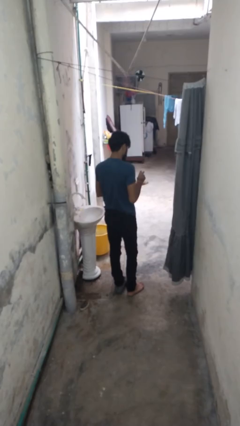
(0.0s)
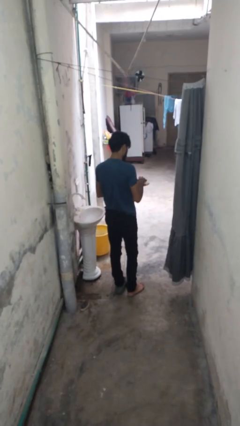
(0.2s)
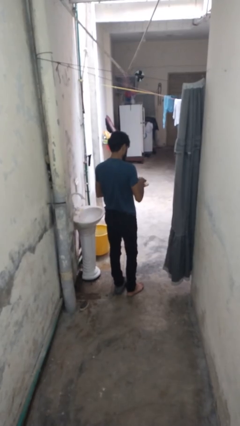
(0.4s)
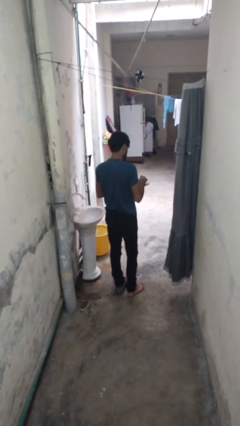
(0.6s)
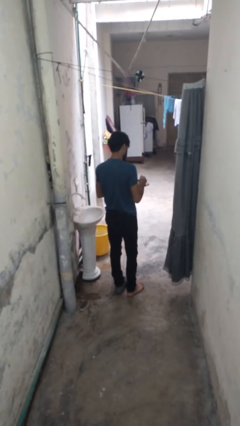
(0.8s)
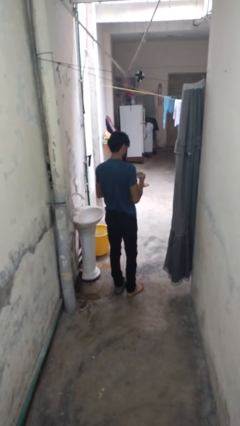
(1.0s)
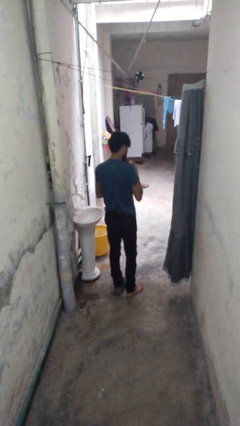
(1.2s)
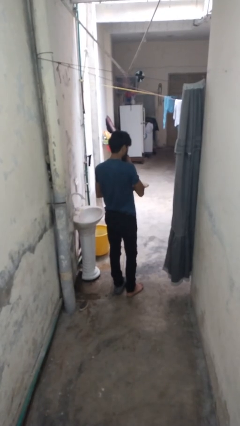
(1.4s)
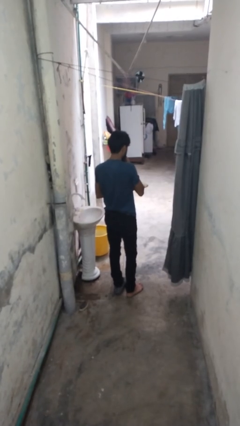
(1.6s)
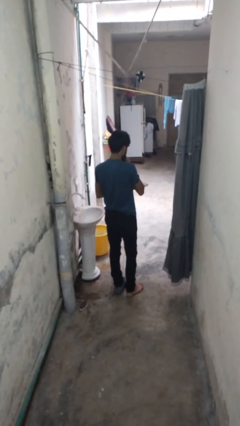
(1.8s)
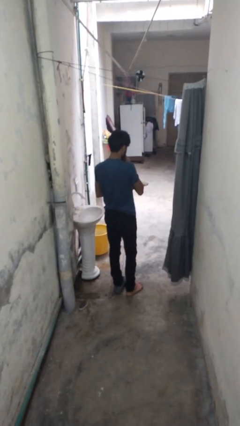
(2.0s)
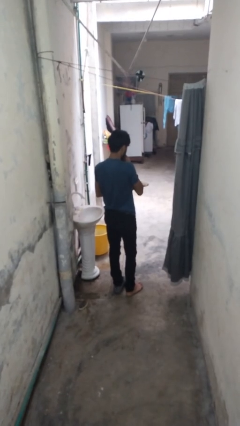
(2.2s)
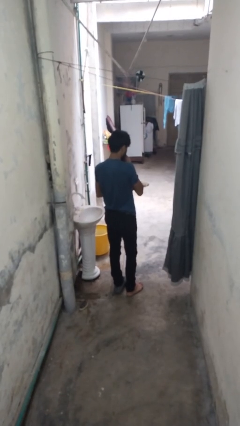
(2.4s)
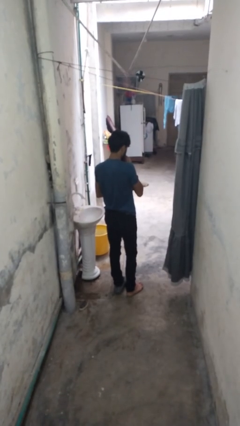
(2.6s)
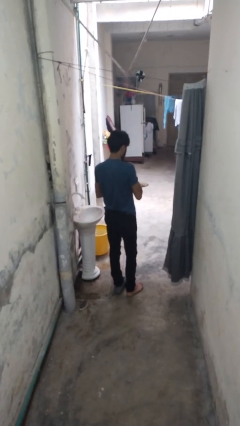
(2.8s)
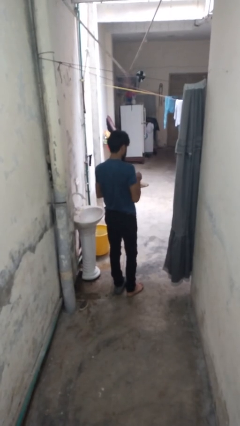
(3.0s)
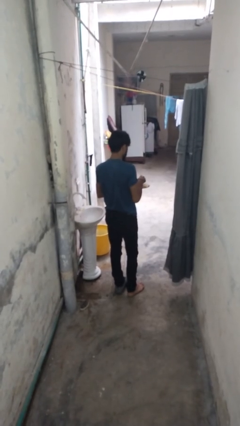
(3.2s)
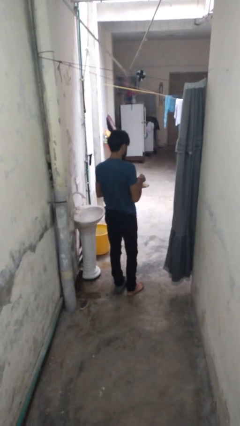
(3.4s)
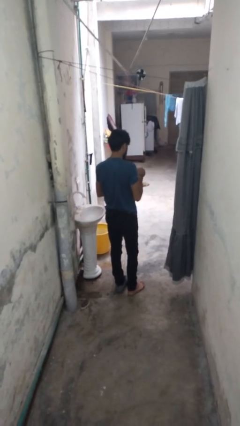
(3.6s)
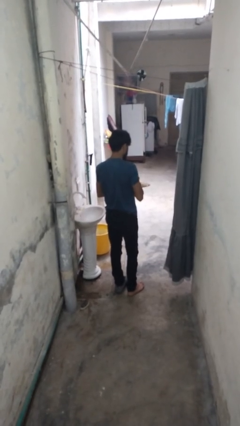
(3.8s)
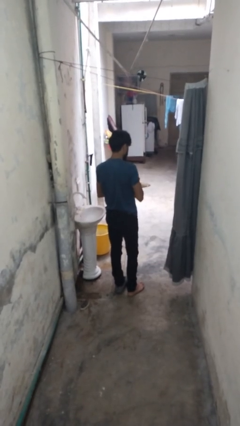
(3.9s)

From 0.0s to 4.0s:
person eats with hands

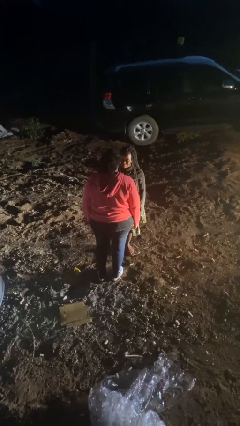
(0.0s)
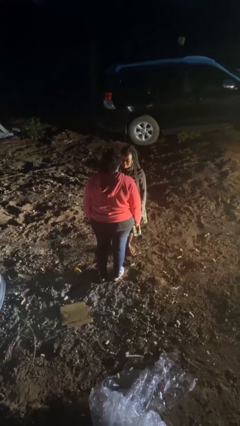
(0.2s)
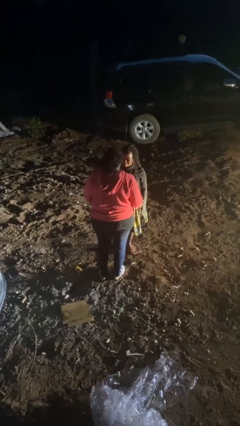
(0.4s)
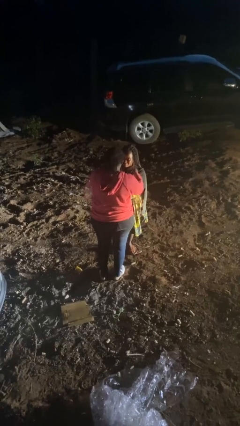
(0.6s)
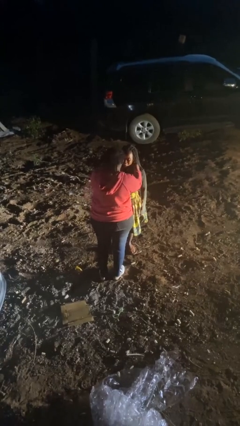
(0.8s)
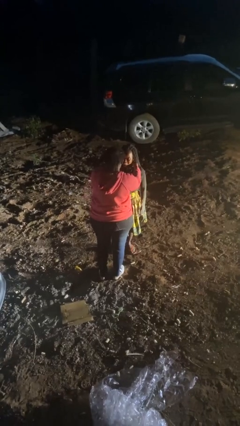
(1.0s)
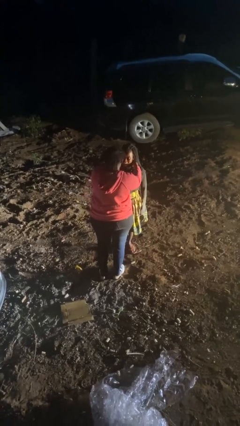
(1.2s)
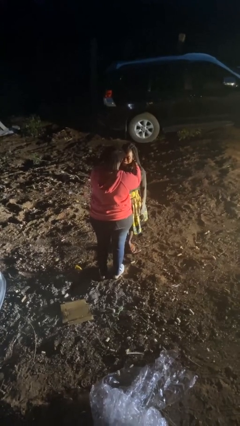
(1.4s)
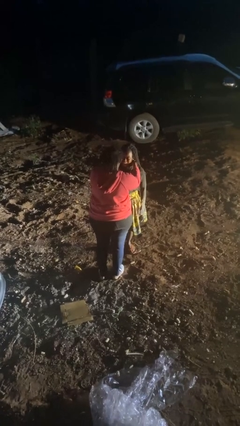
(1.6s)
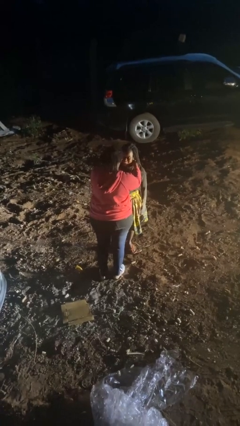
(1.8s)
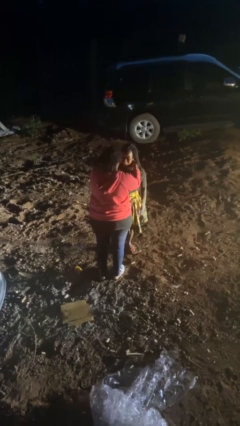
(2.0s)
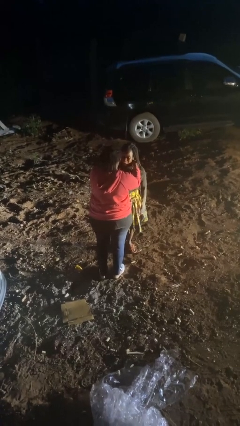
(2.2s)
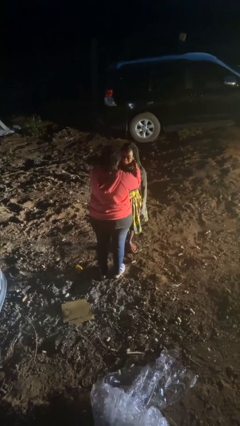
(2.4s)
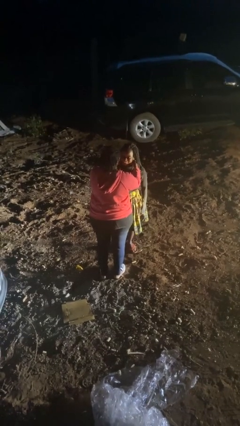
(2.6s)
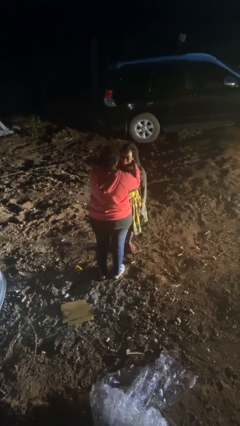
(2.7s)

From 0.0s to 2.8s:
person tickles person

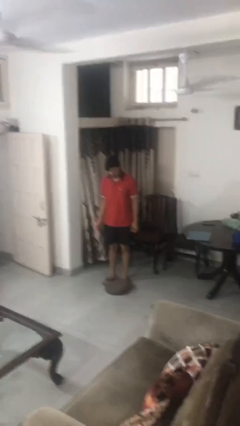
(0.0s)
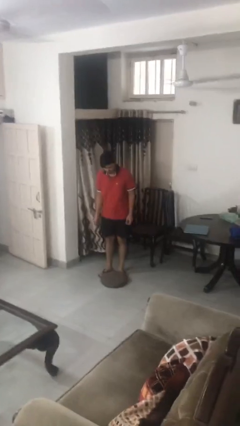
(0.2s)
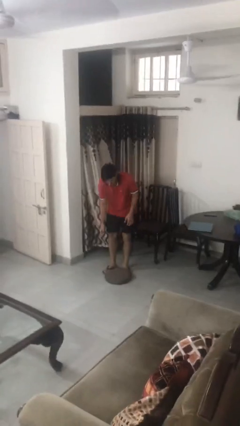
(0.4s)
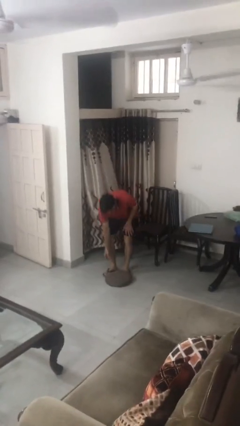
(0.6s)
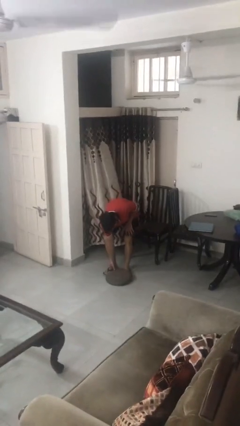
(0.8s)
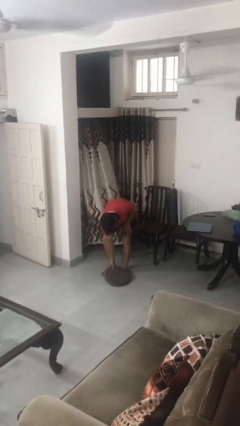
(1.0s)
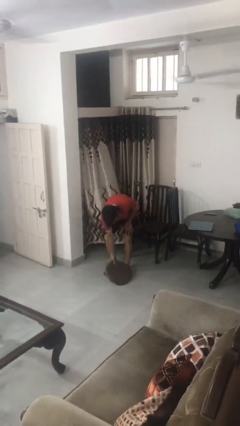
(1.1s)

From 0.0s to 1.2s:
person picks up object from floor

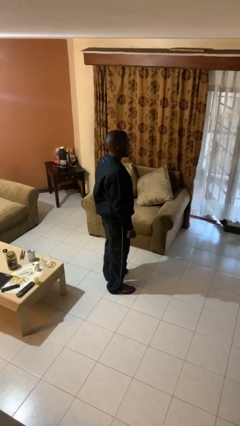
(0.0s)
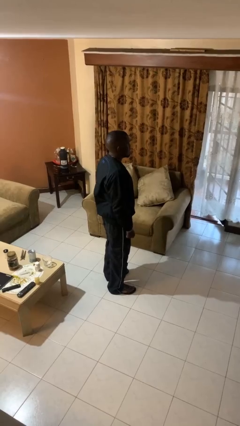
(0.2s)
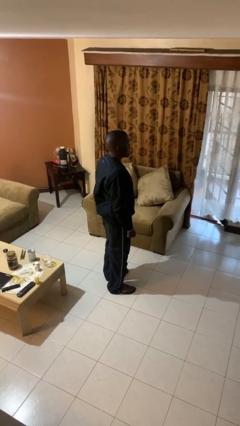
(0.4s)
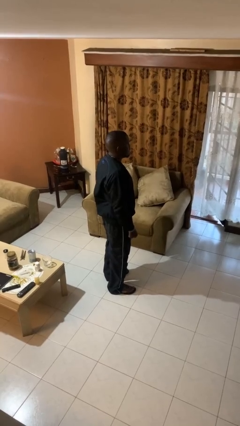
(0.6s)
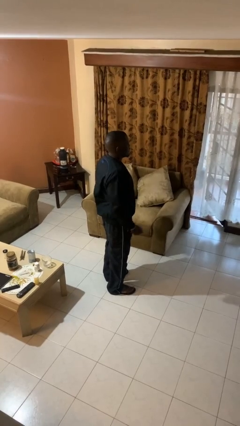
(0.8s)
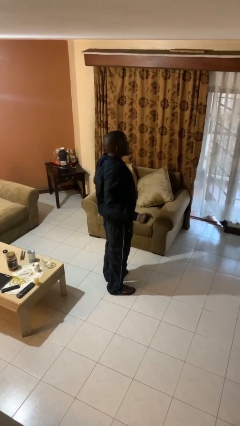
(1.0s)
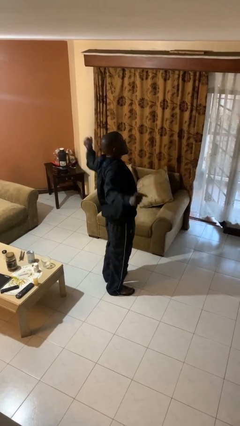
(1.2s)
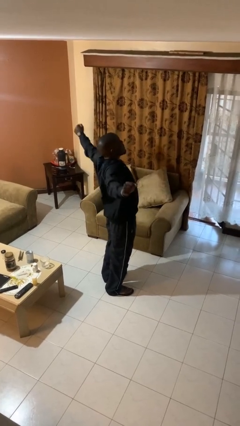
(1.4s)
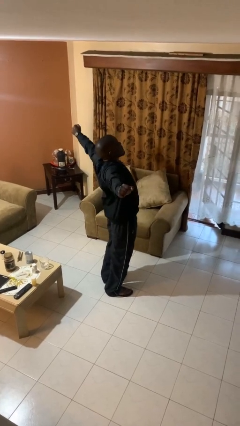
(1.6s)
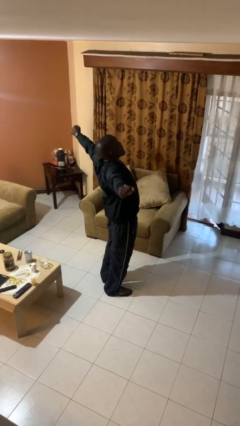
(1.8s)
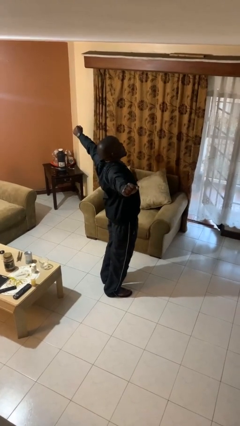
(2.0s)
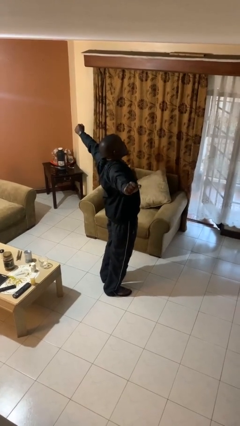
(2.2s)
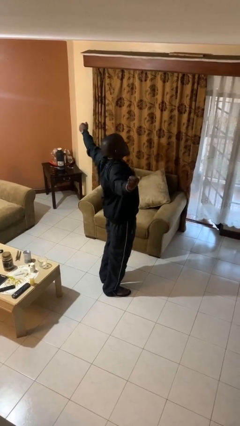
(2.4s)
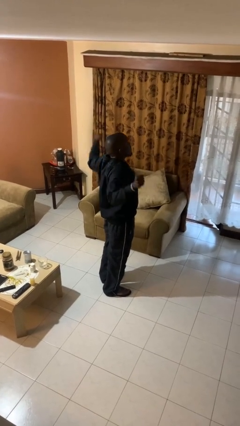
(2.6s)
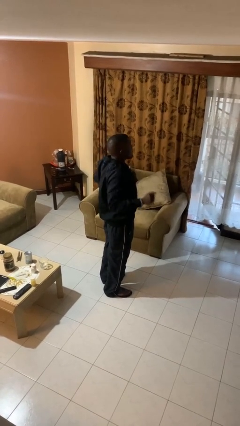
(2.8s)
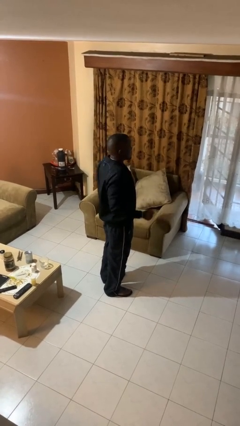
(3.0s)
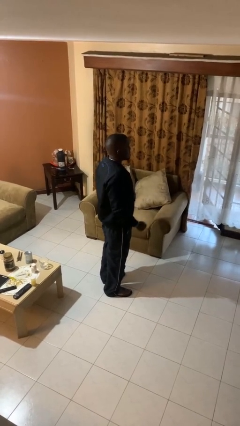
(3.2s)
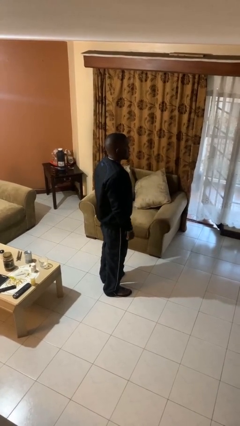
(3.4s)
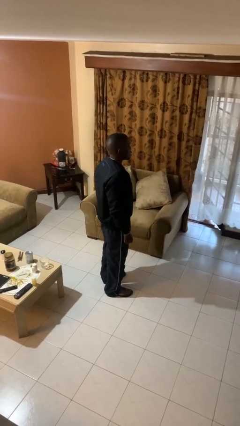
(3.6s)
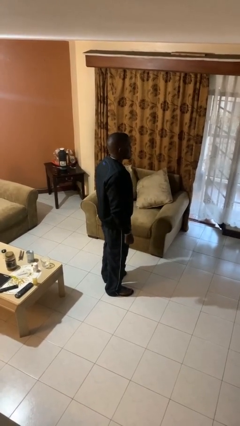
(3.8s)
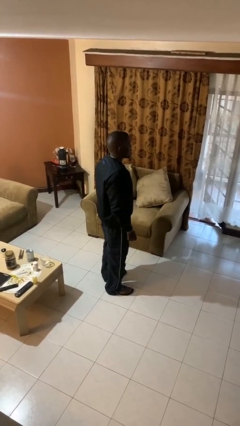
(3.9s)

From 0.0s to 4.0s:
person stretches arms to side

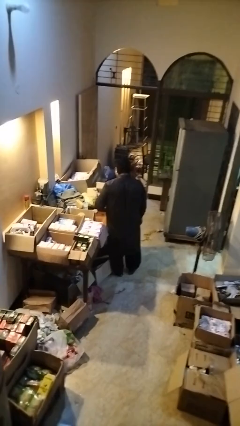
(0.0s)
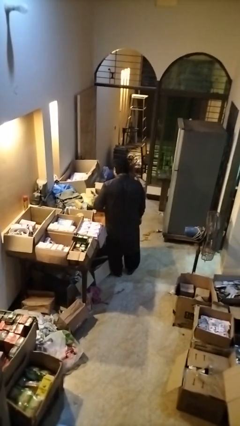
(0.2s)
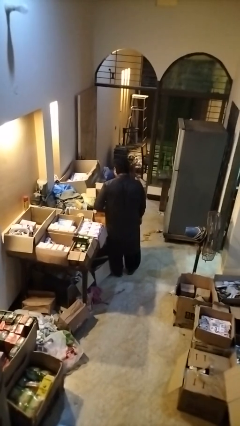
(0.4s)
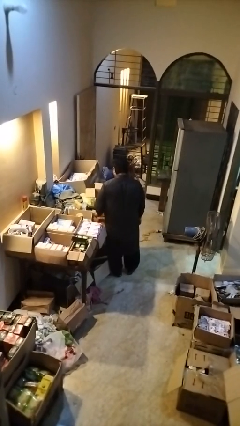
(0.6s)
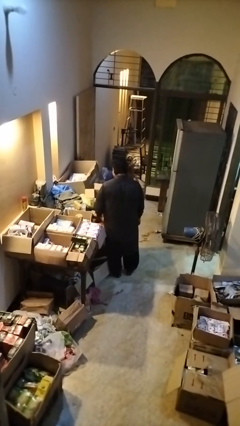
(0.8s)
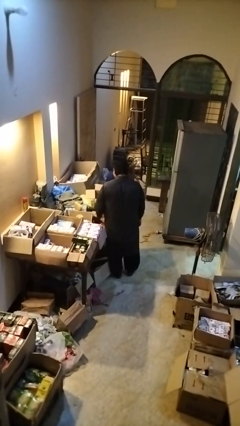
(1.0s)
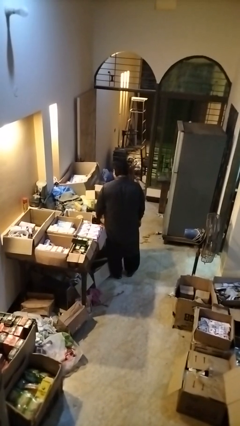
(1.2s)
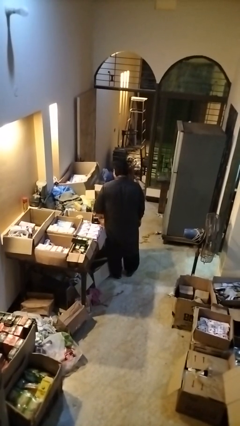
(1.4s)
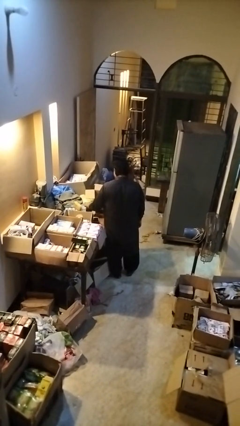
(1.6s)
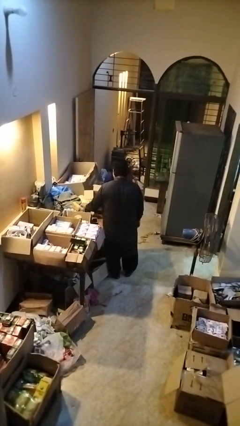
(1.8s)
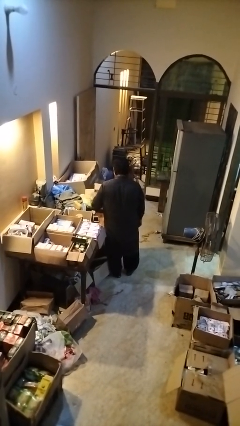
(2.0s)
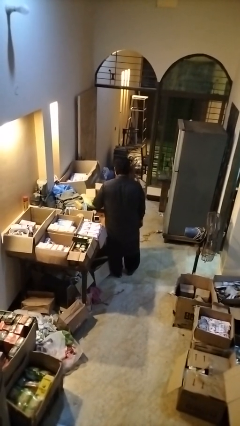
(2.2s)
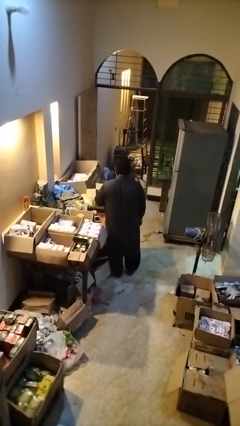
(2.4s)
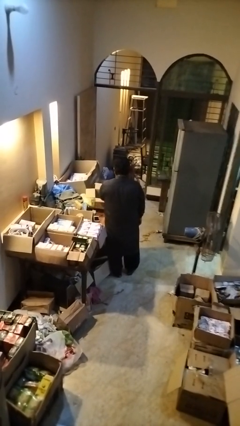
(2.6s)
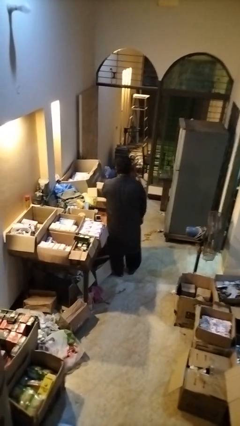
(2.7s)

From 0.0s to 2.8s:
person puts object into box

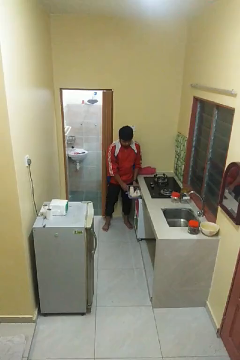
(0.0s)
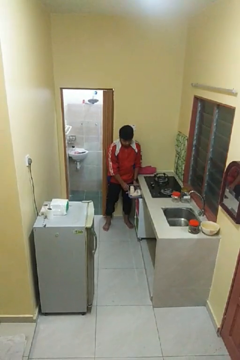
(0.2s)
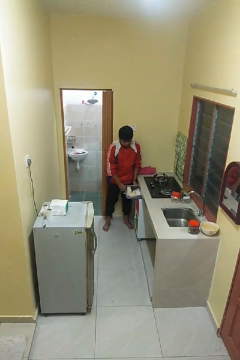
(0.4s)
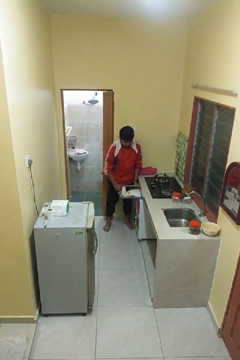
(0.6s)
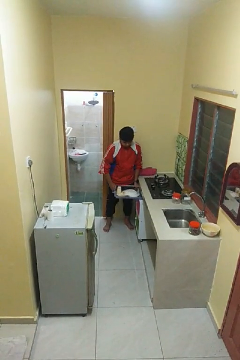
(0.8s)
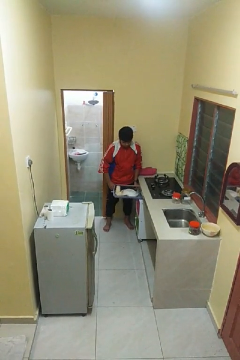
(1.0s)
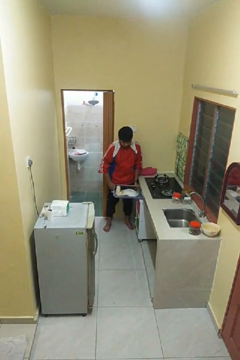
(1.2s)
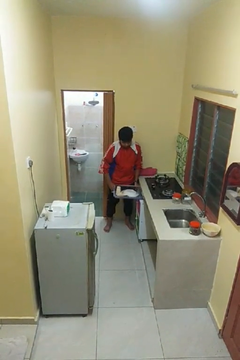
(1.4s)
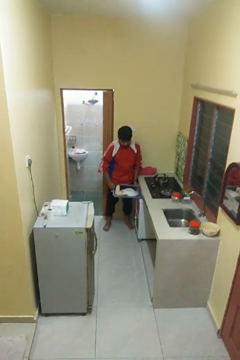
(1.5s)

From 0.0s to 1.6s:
person opens kitchen drawer

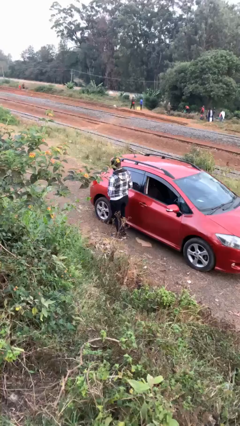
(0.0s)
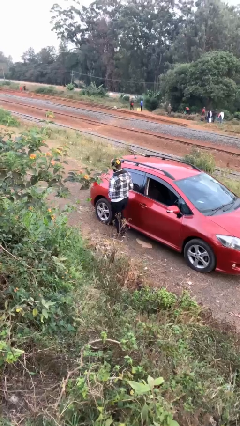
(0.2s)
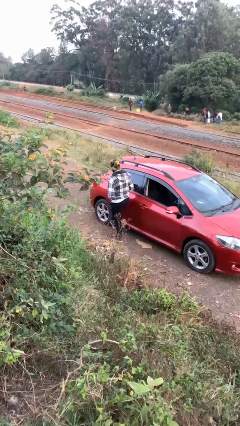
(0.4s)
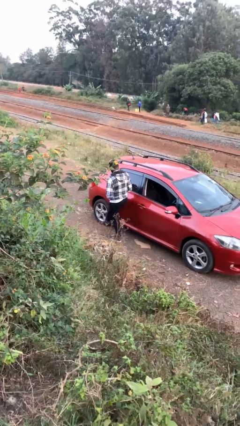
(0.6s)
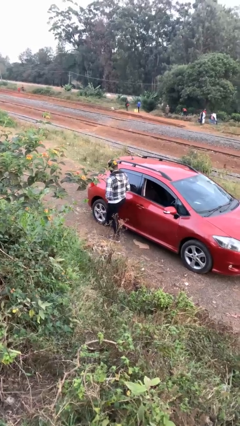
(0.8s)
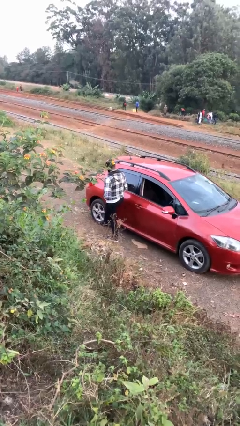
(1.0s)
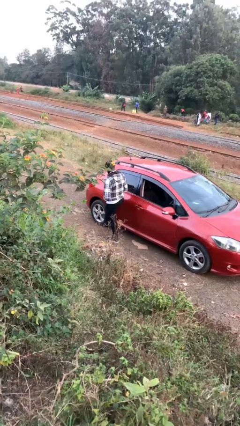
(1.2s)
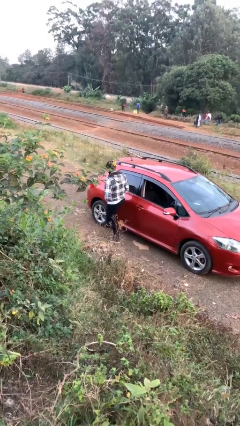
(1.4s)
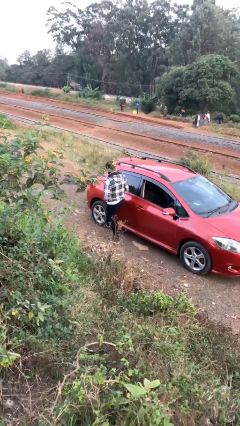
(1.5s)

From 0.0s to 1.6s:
person kicks car tires
